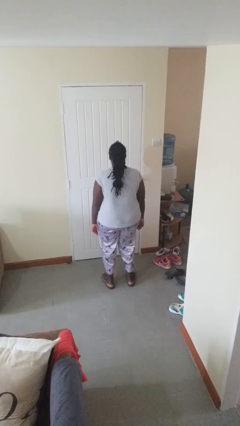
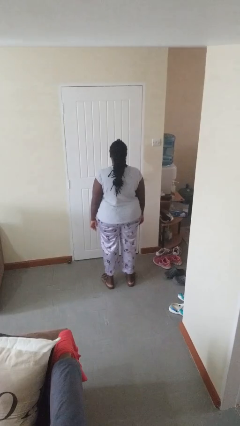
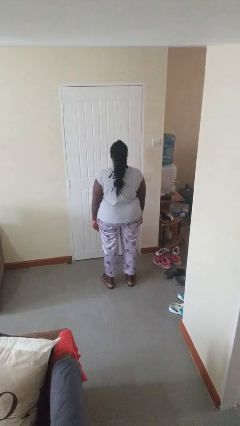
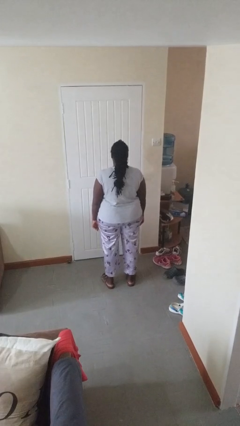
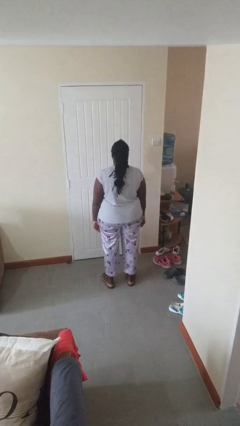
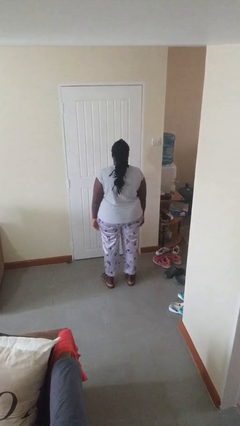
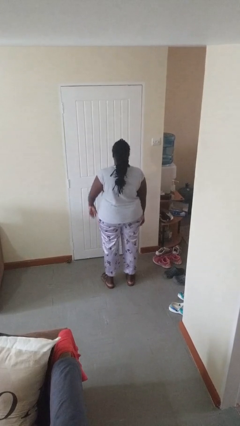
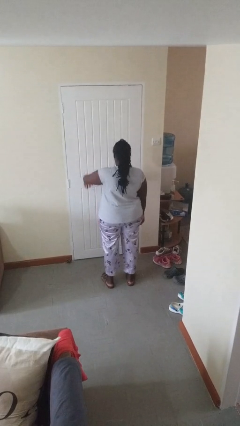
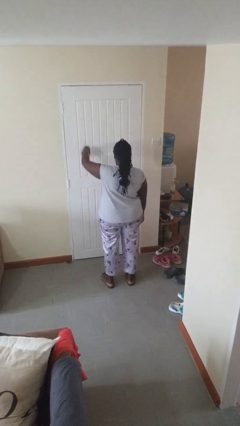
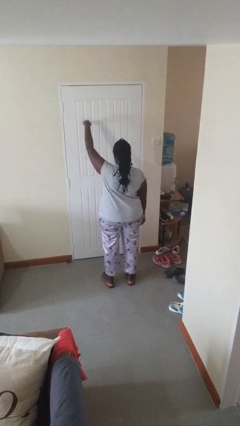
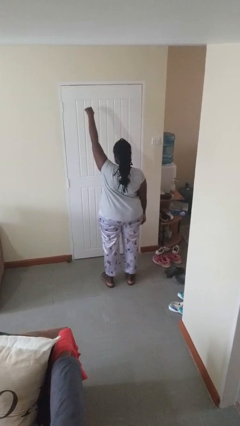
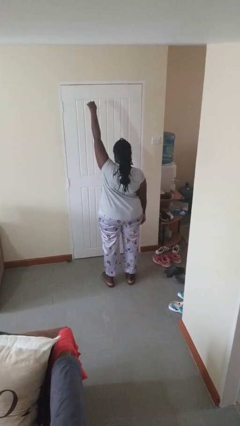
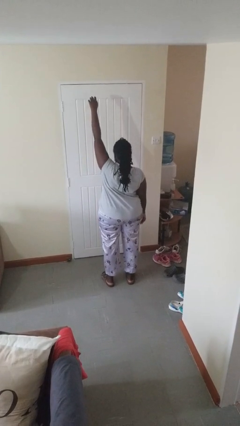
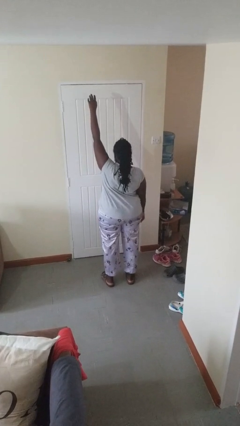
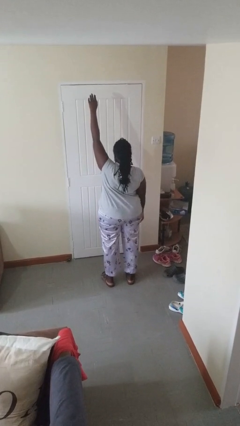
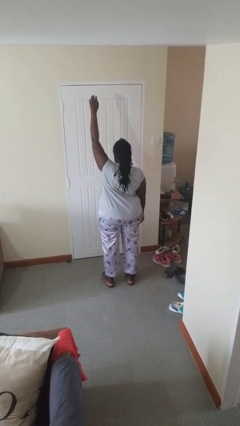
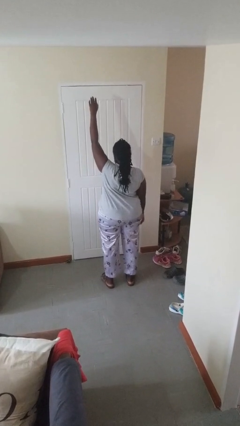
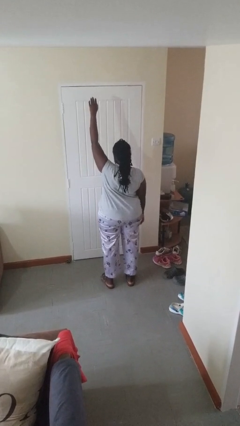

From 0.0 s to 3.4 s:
person gestures swipe up

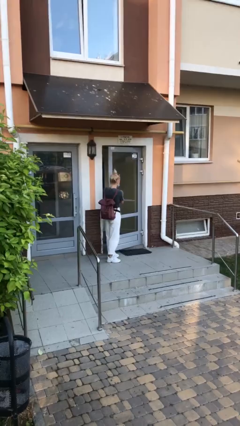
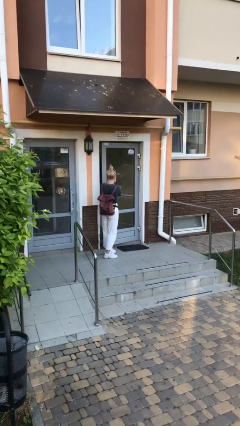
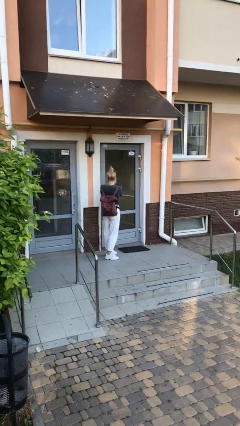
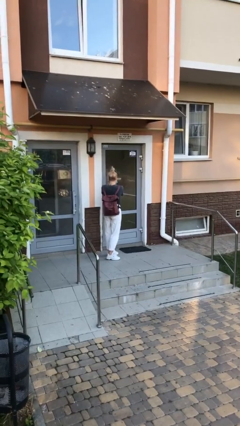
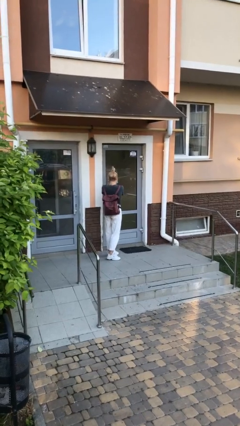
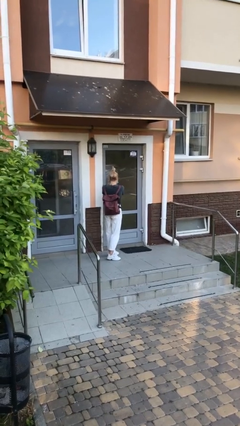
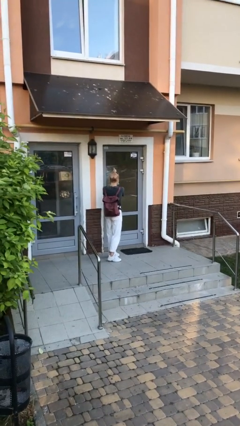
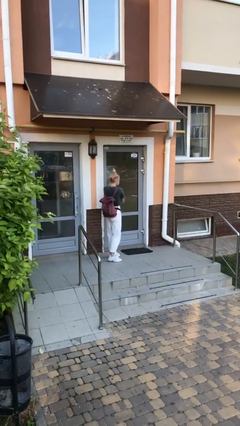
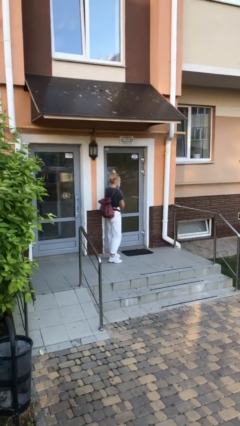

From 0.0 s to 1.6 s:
person closes facility door

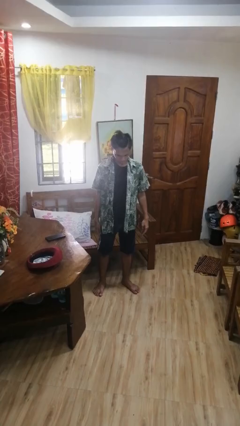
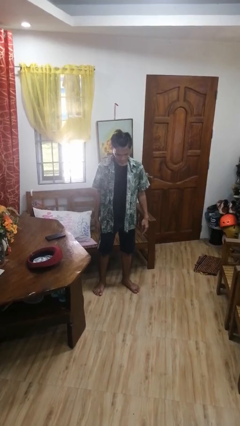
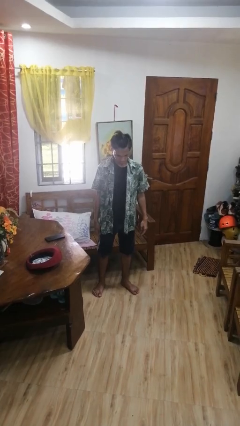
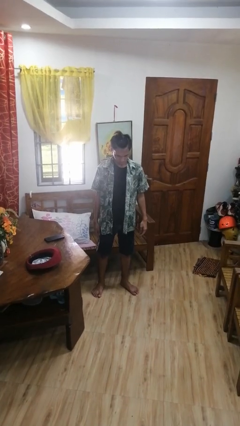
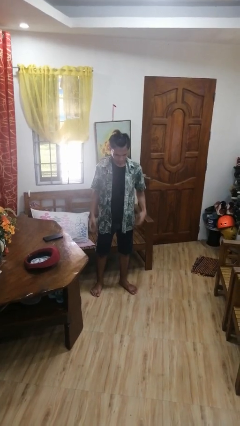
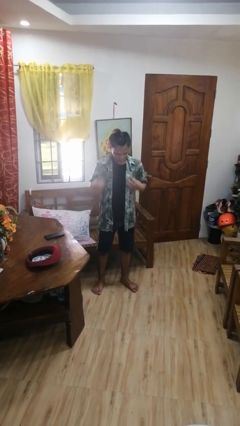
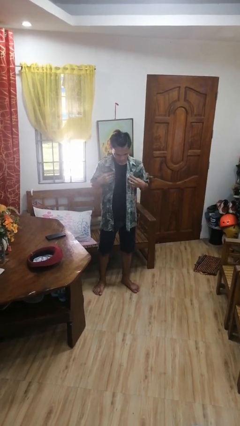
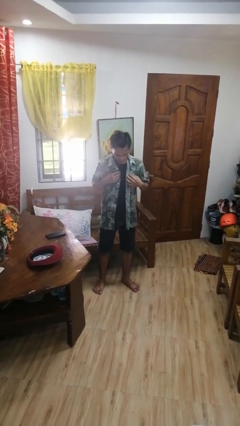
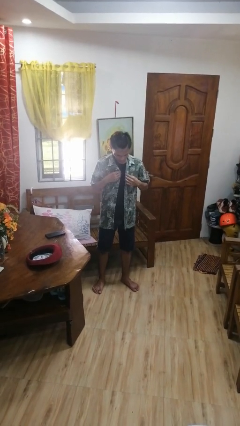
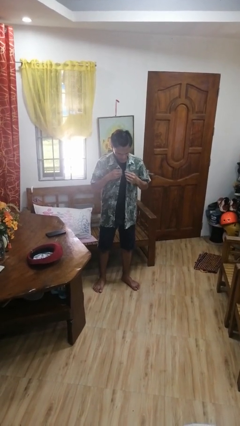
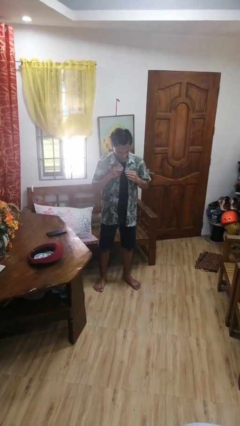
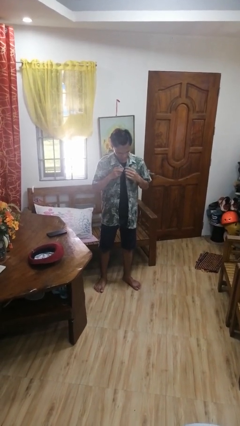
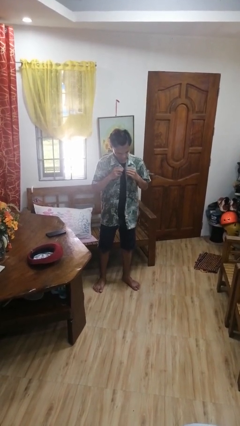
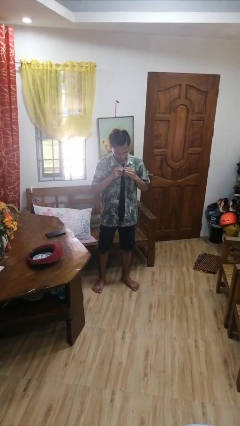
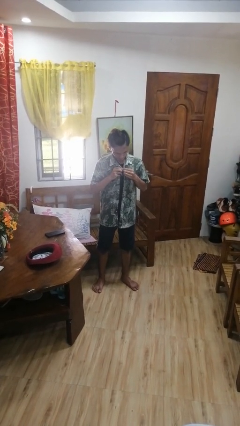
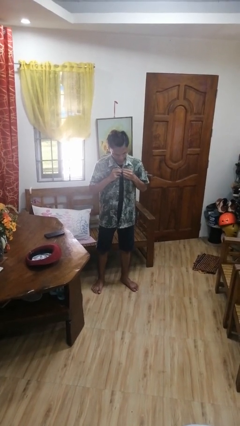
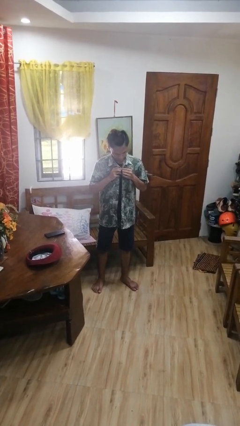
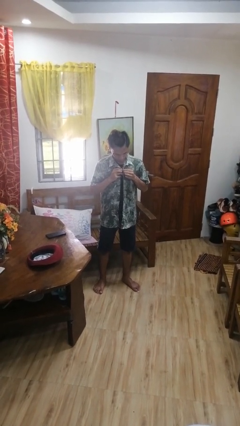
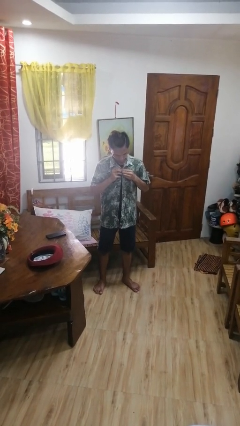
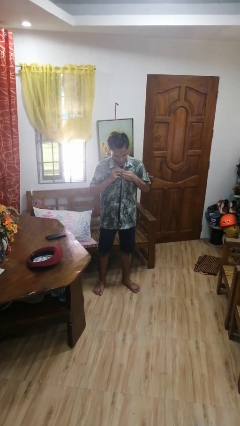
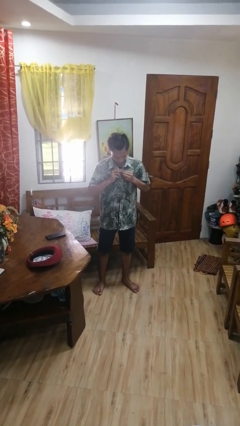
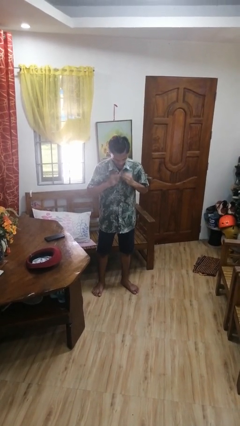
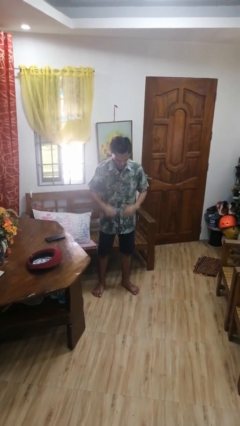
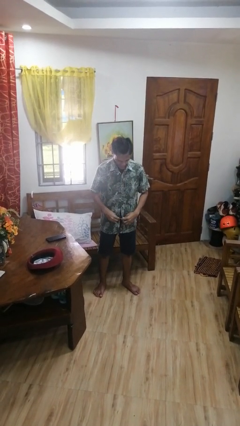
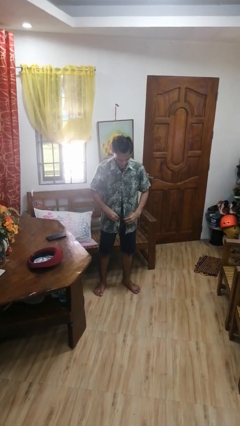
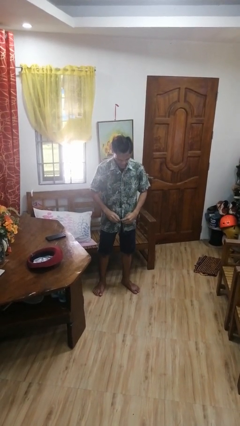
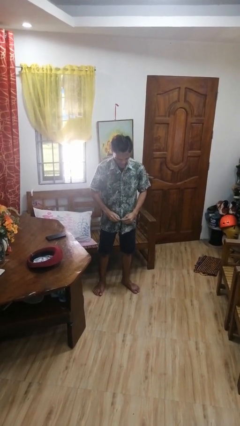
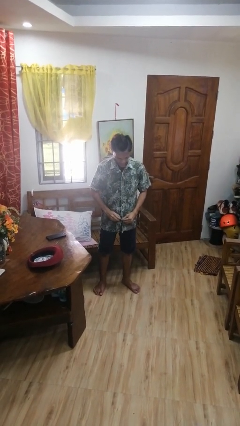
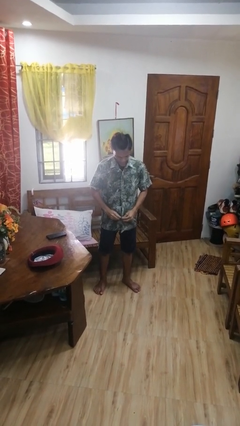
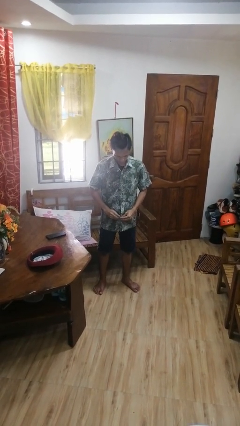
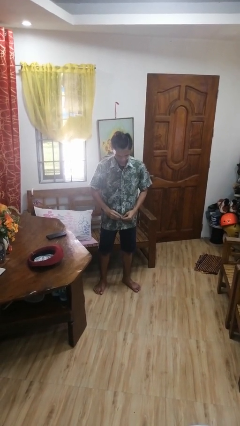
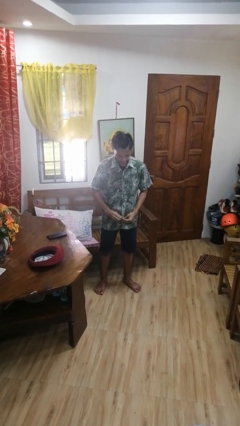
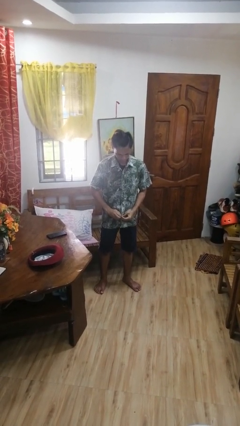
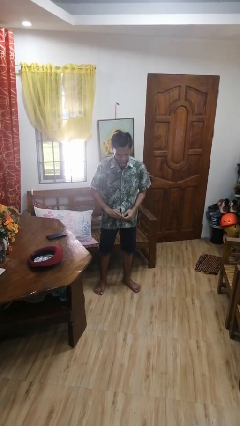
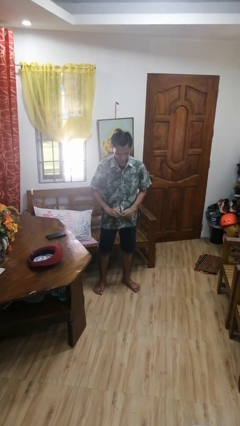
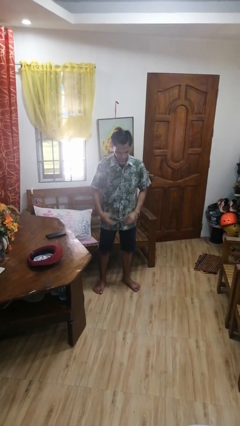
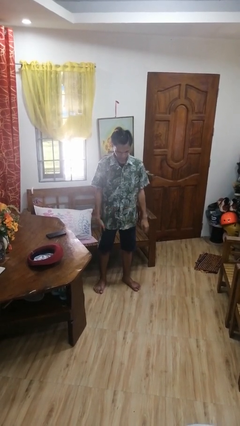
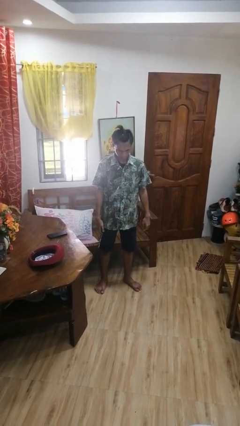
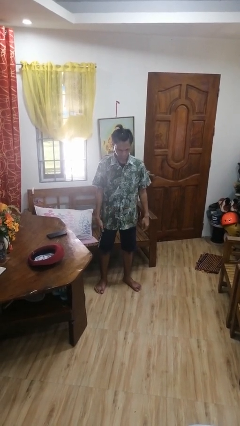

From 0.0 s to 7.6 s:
person buttons shirt

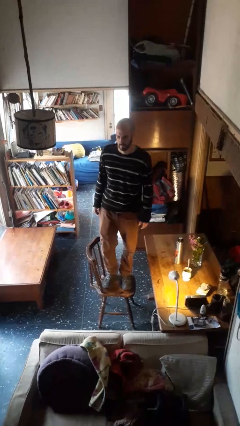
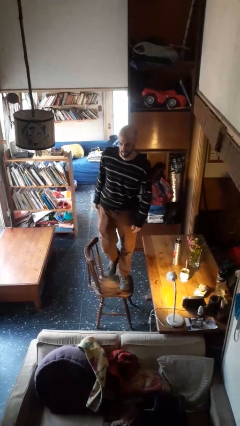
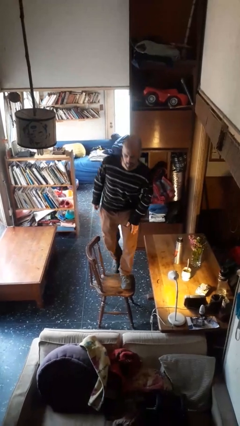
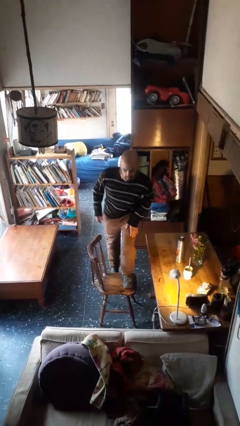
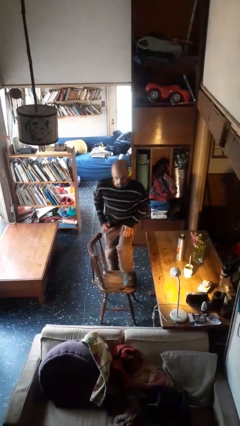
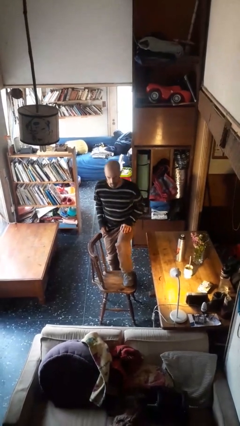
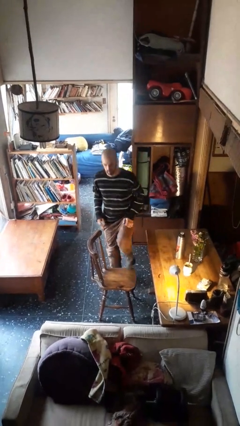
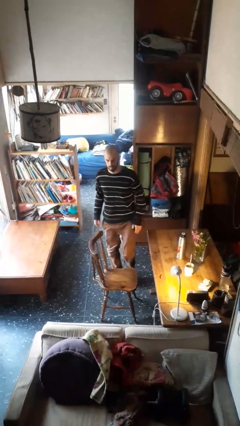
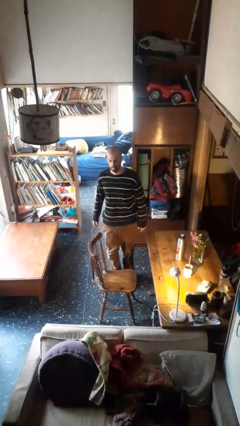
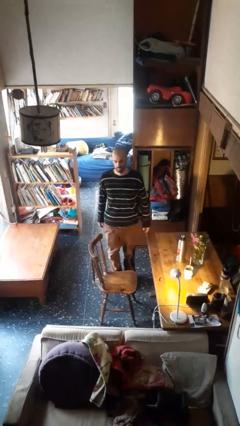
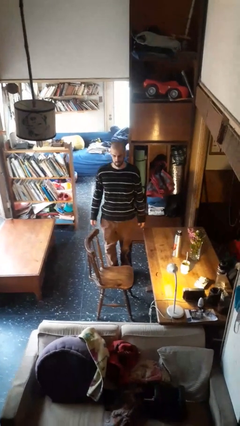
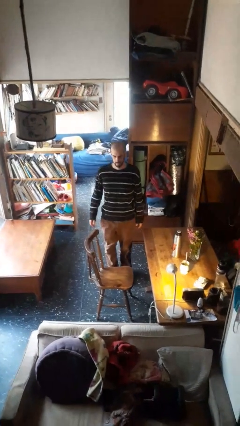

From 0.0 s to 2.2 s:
person climbs off chair

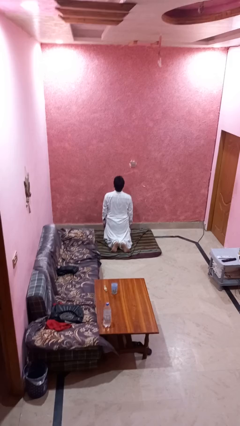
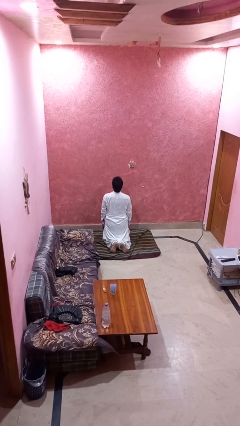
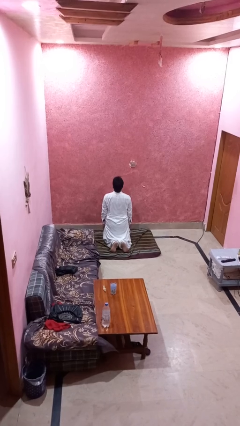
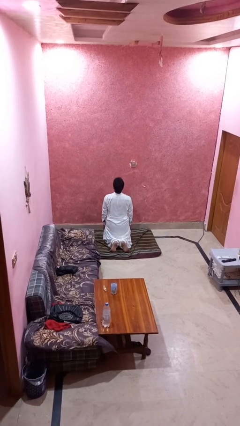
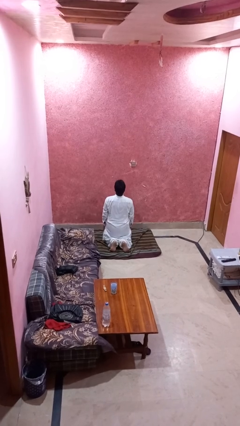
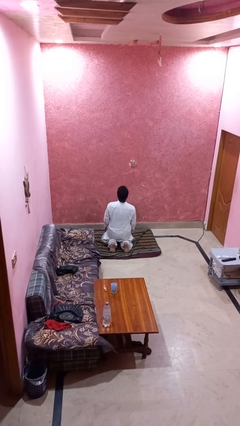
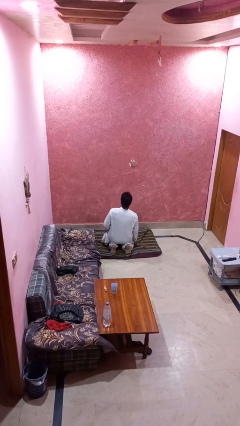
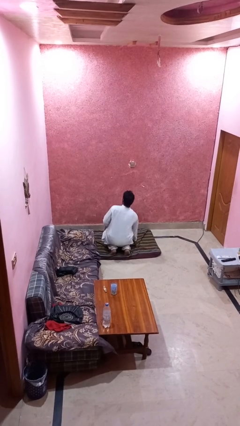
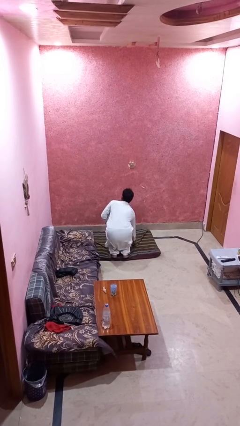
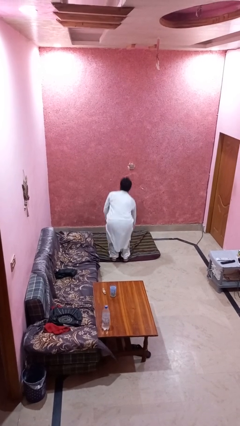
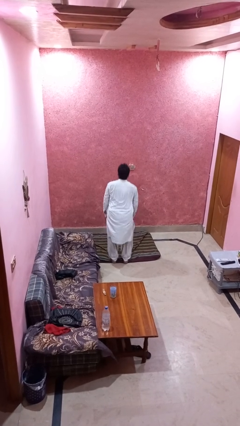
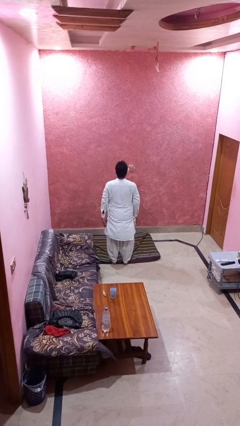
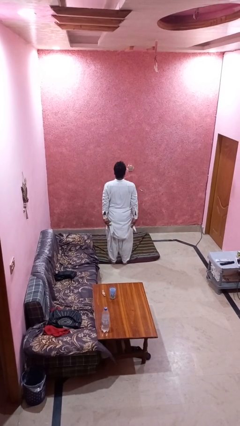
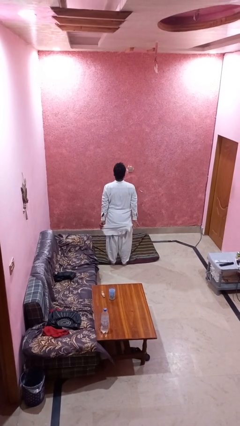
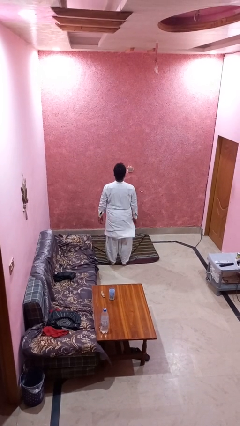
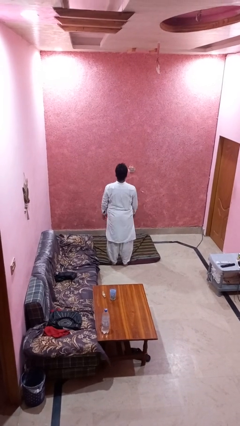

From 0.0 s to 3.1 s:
person stands up from floor
